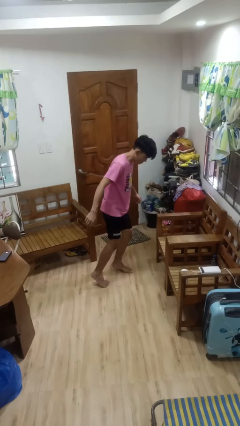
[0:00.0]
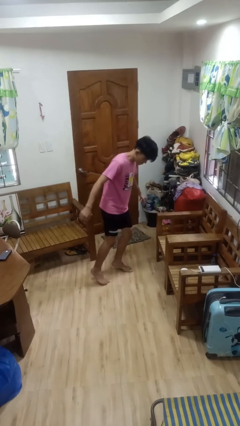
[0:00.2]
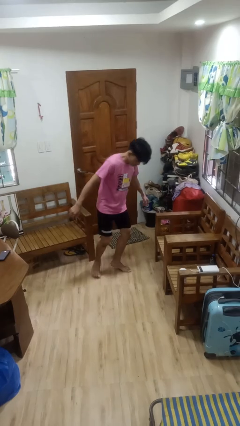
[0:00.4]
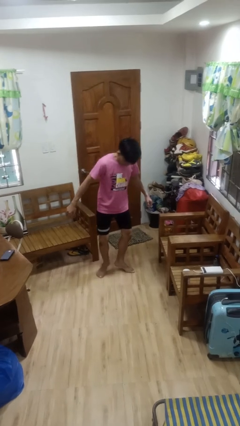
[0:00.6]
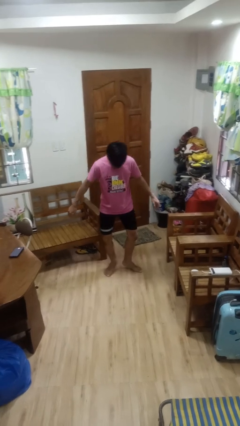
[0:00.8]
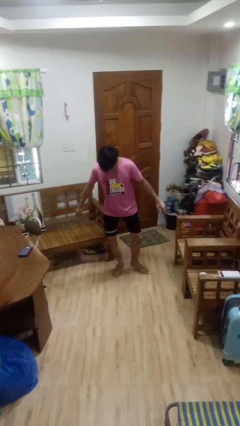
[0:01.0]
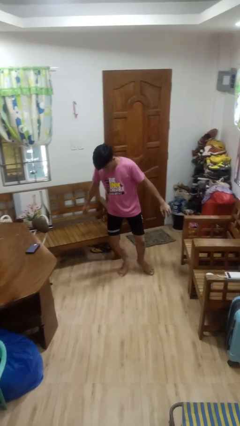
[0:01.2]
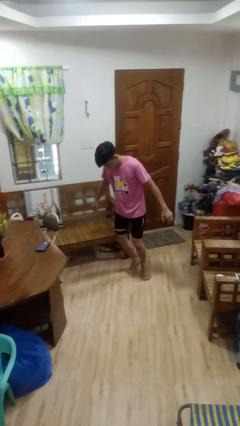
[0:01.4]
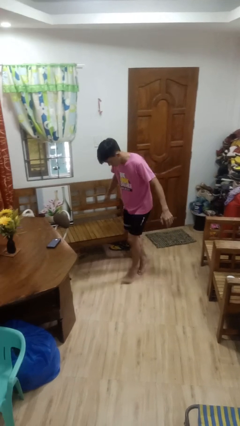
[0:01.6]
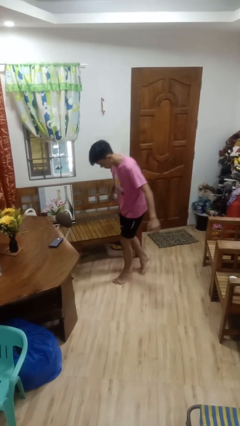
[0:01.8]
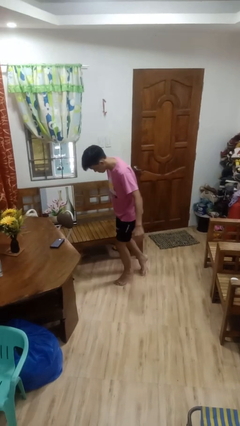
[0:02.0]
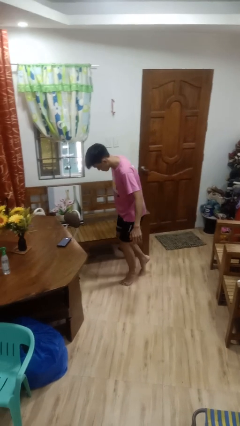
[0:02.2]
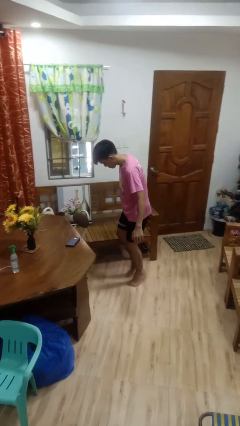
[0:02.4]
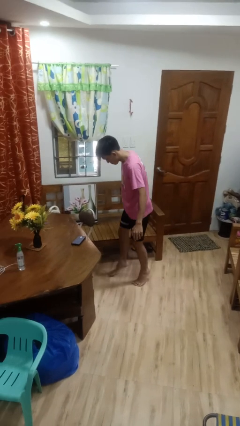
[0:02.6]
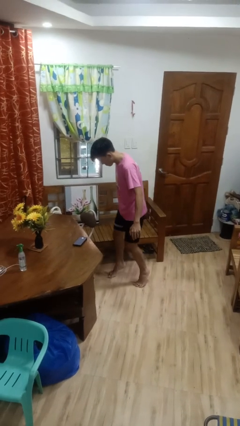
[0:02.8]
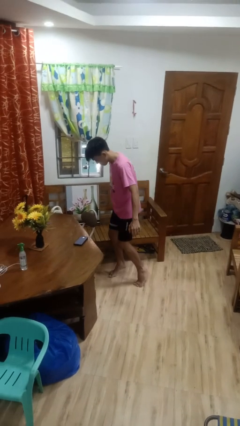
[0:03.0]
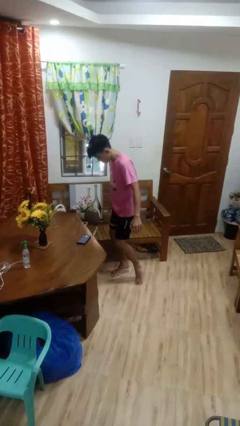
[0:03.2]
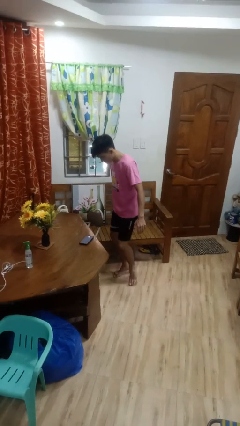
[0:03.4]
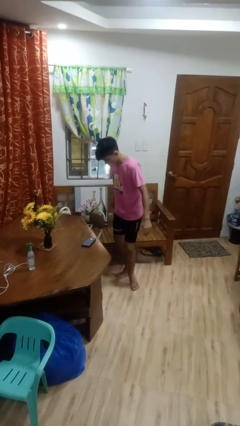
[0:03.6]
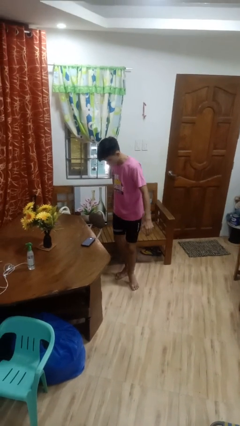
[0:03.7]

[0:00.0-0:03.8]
person walks tiptoe

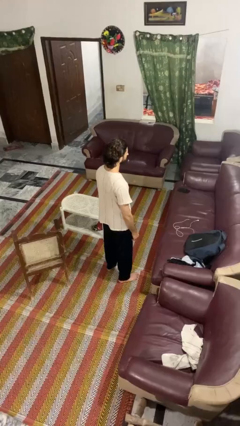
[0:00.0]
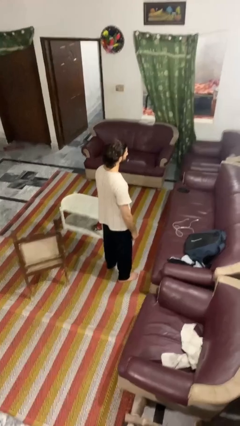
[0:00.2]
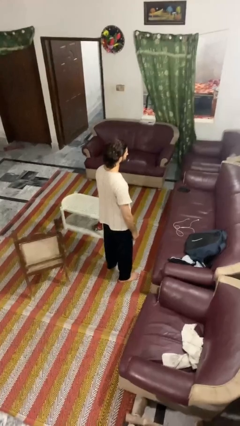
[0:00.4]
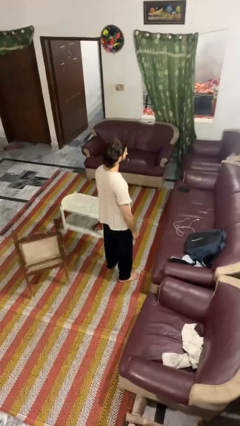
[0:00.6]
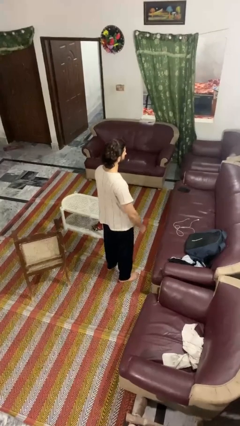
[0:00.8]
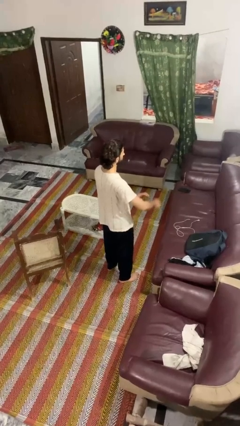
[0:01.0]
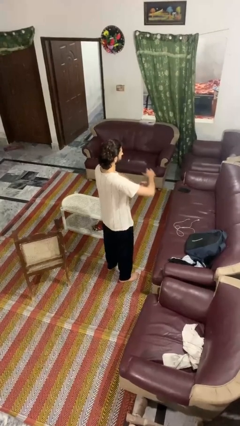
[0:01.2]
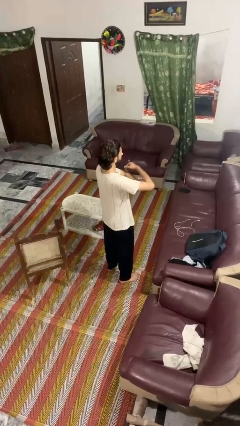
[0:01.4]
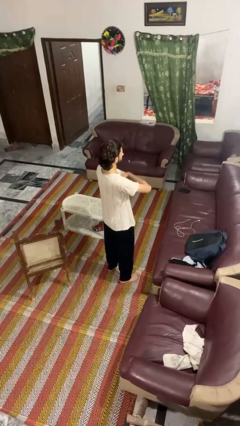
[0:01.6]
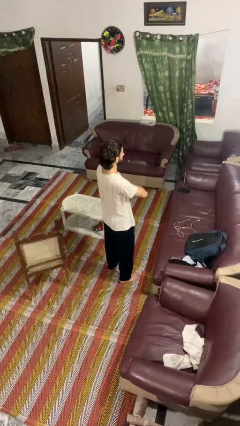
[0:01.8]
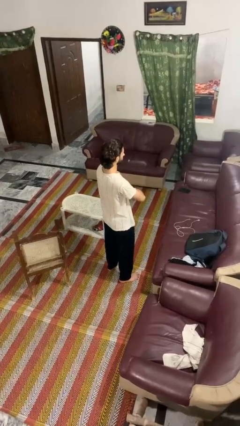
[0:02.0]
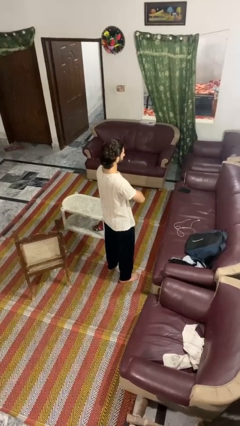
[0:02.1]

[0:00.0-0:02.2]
person crosses arms

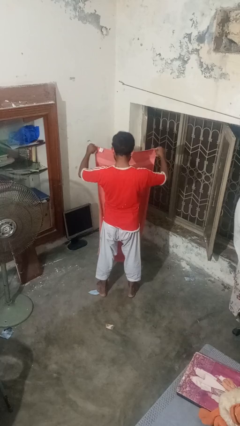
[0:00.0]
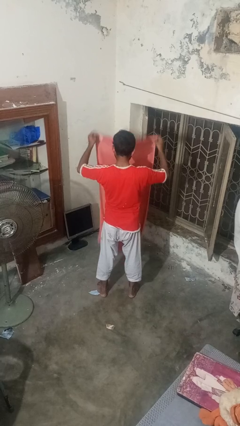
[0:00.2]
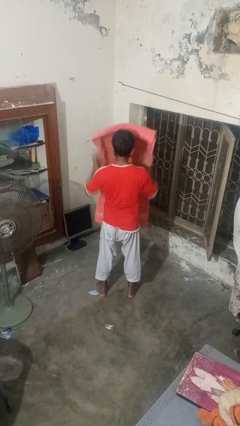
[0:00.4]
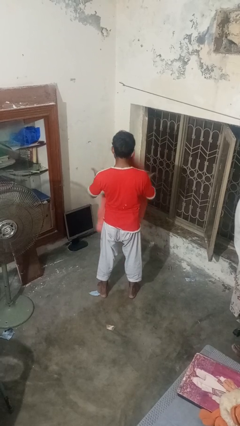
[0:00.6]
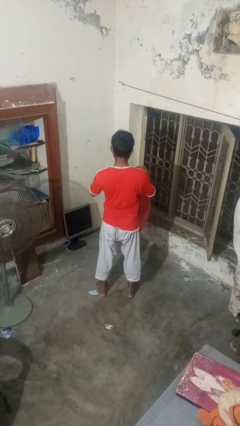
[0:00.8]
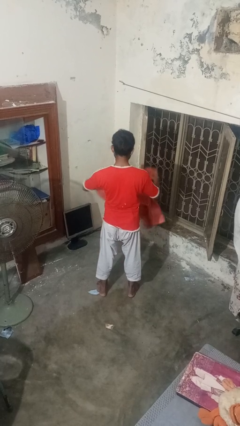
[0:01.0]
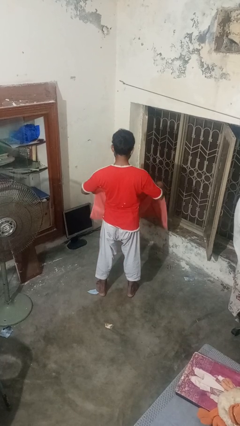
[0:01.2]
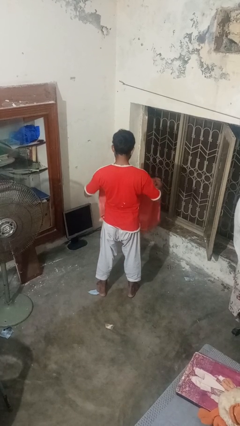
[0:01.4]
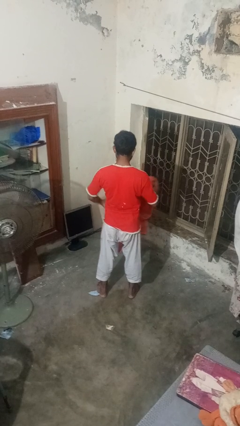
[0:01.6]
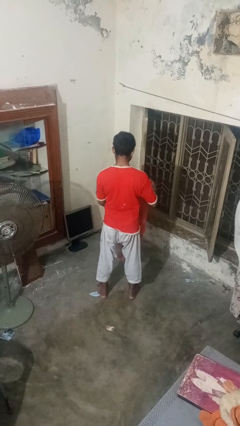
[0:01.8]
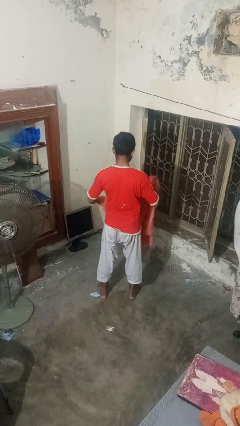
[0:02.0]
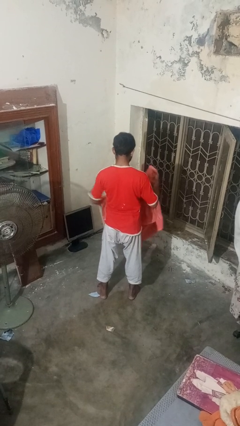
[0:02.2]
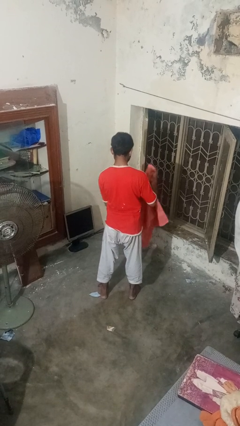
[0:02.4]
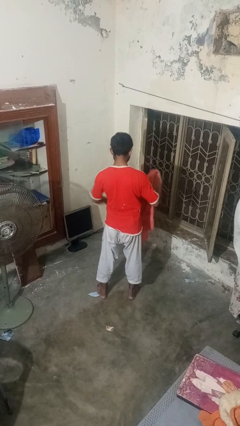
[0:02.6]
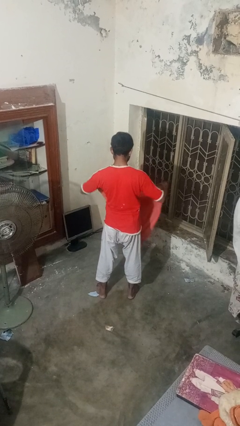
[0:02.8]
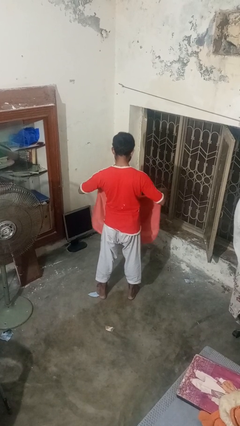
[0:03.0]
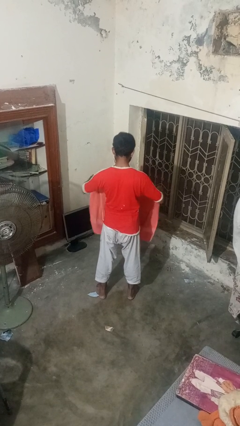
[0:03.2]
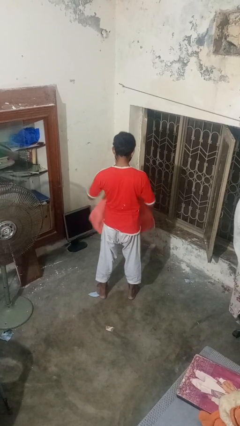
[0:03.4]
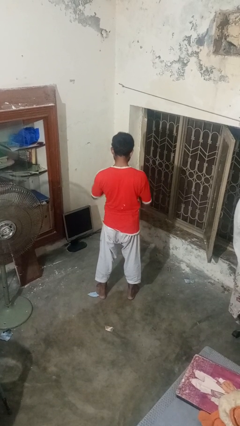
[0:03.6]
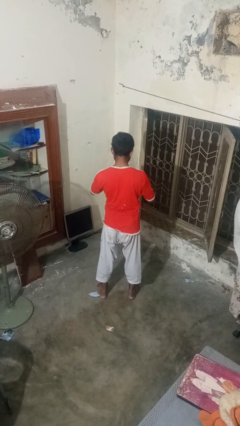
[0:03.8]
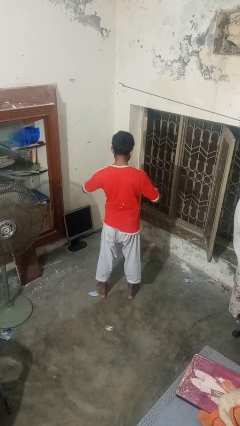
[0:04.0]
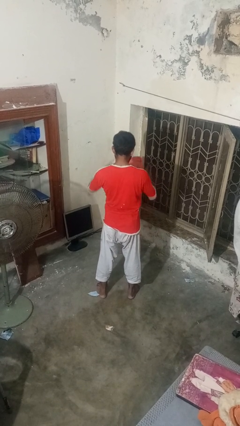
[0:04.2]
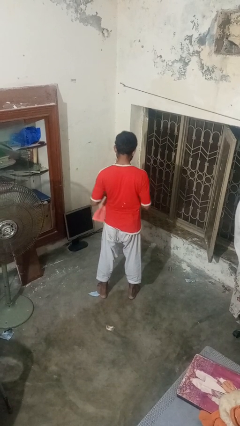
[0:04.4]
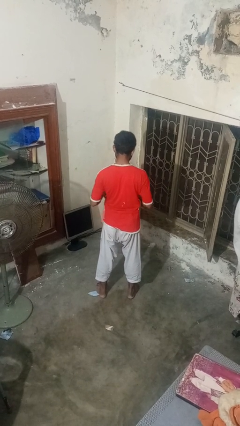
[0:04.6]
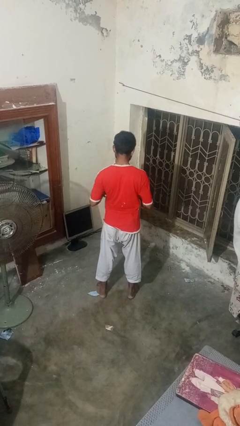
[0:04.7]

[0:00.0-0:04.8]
person folds towel

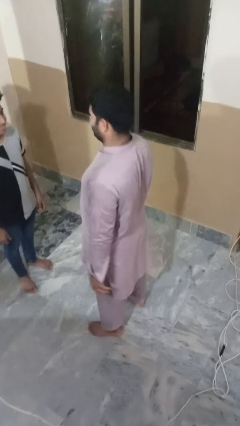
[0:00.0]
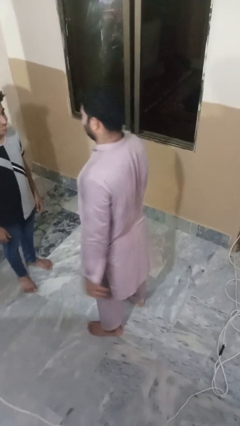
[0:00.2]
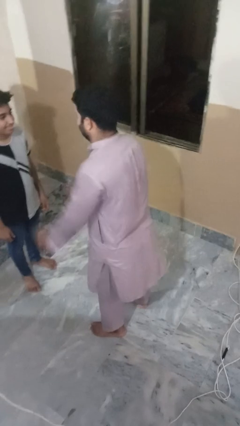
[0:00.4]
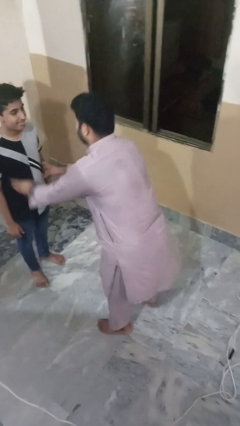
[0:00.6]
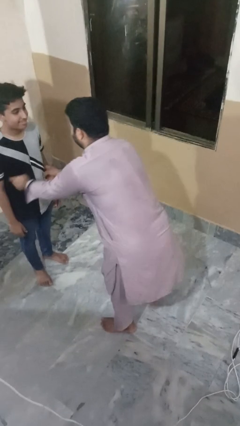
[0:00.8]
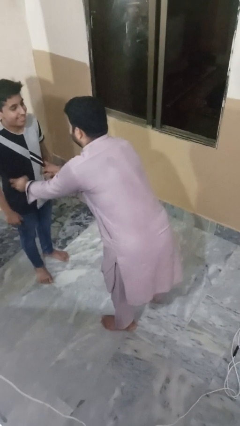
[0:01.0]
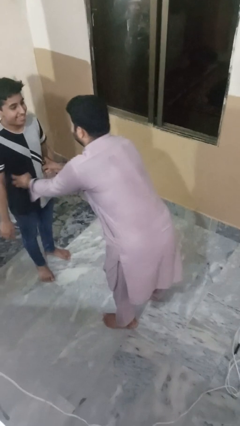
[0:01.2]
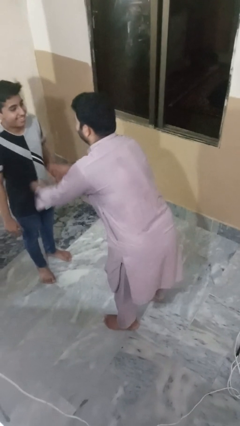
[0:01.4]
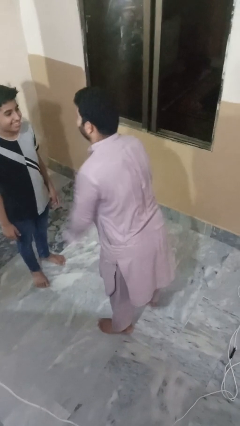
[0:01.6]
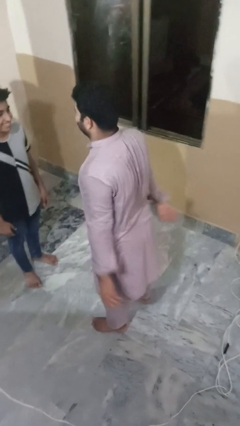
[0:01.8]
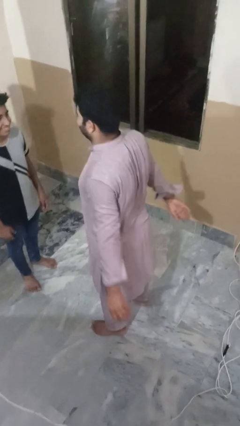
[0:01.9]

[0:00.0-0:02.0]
person tickles person

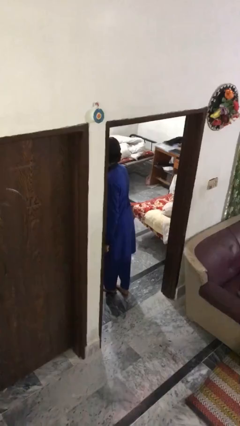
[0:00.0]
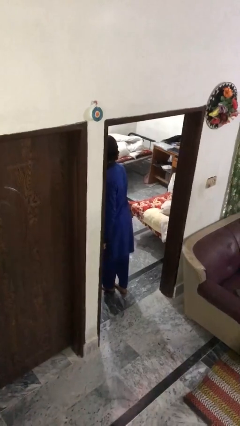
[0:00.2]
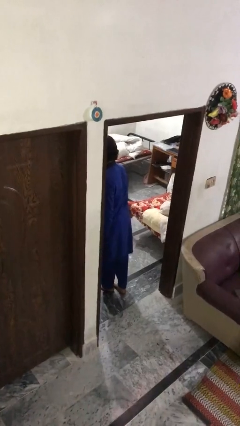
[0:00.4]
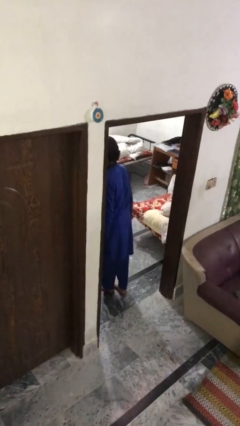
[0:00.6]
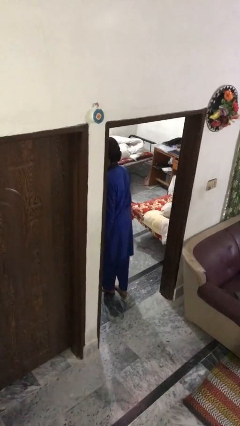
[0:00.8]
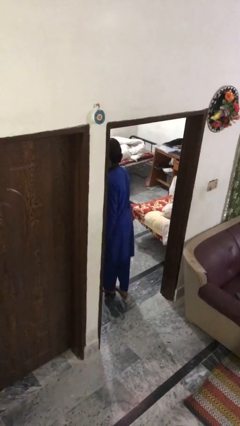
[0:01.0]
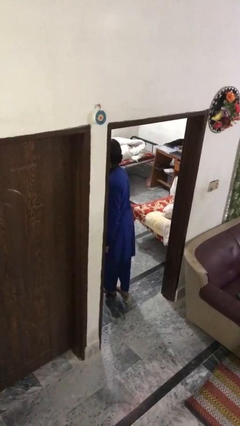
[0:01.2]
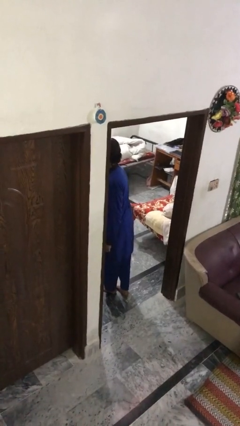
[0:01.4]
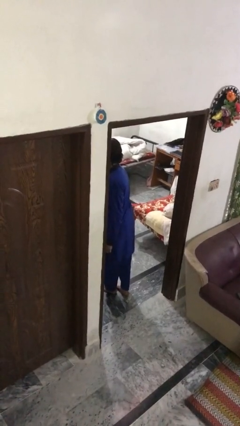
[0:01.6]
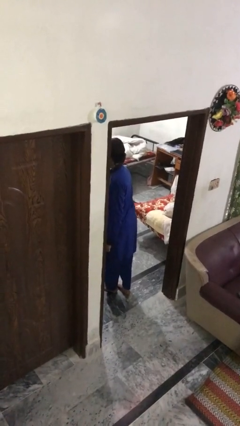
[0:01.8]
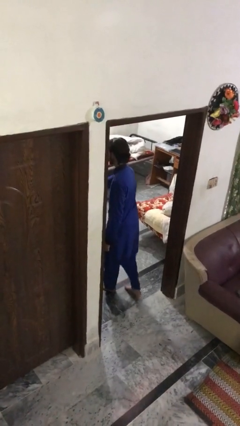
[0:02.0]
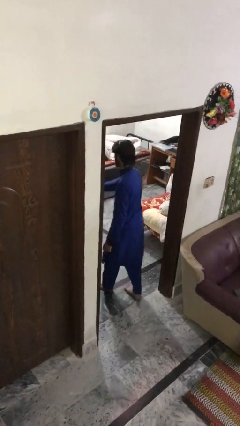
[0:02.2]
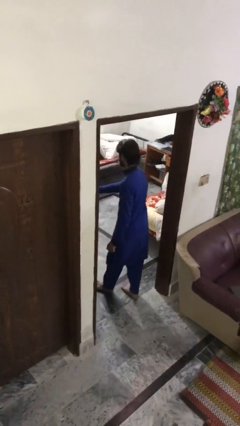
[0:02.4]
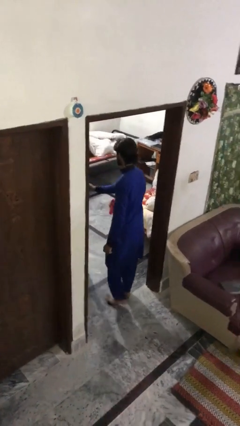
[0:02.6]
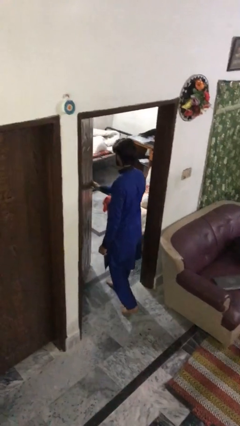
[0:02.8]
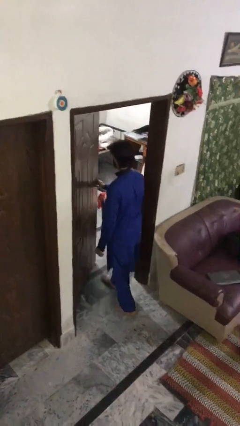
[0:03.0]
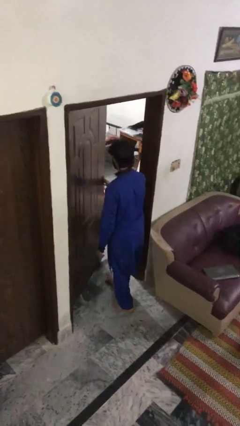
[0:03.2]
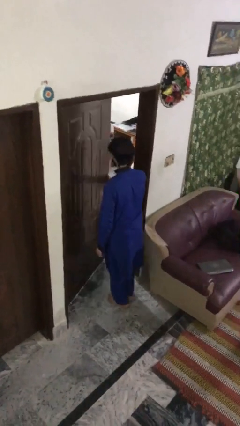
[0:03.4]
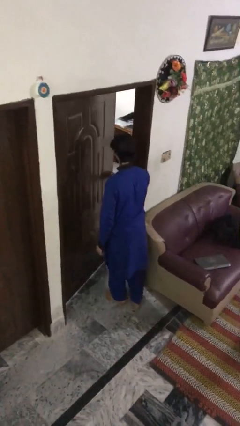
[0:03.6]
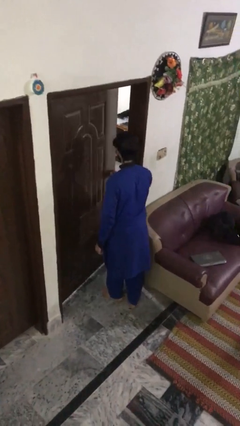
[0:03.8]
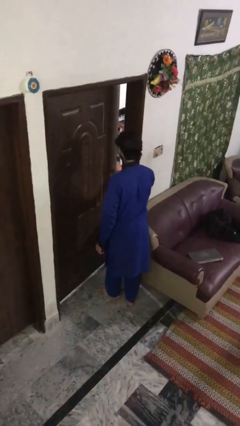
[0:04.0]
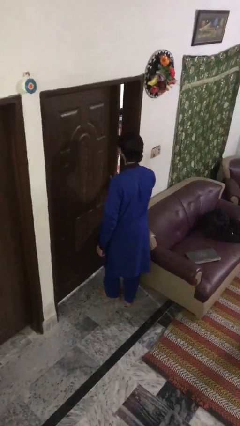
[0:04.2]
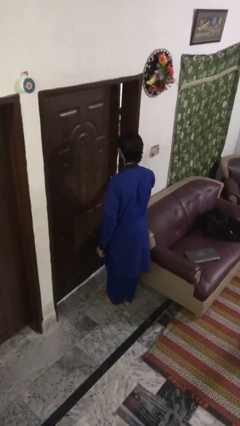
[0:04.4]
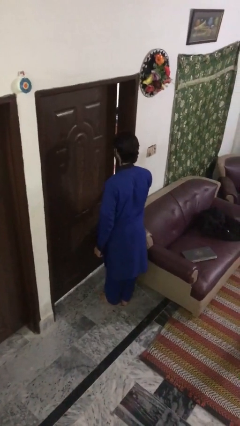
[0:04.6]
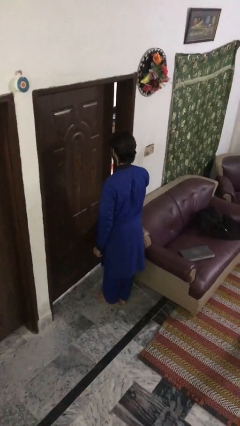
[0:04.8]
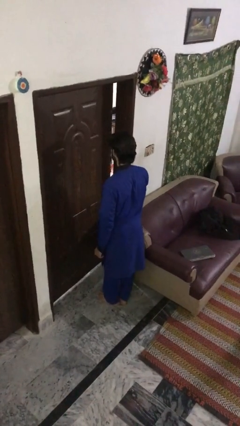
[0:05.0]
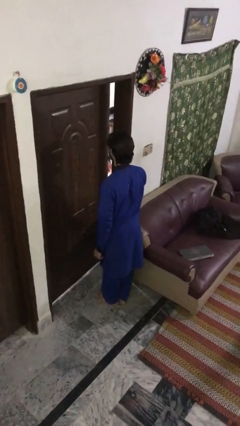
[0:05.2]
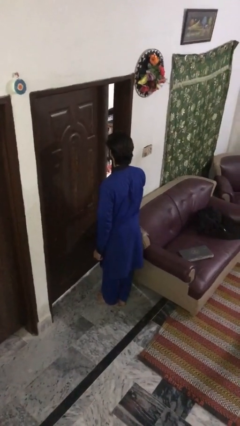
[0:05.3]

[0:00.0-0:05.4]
person closes facility door
